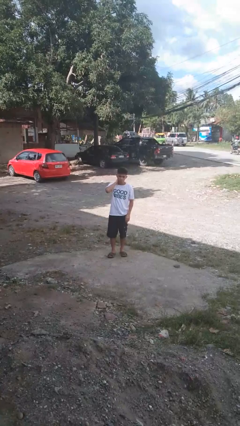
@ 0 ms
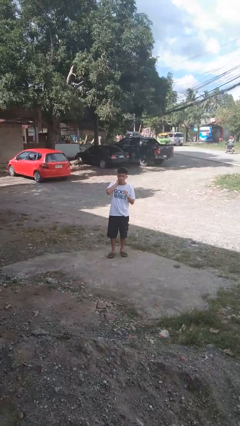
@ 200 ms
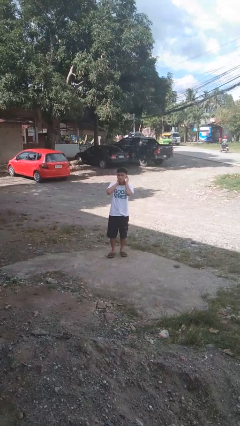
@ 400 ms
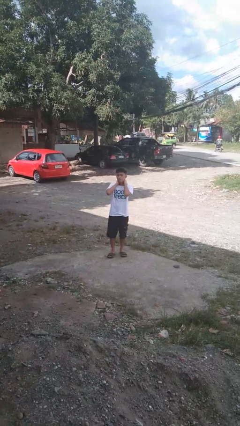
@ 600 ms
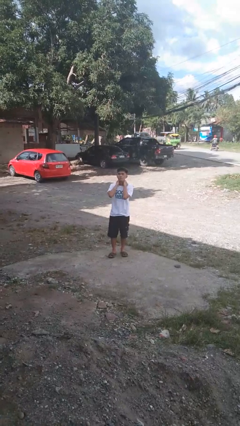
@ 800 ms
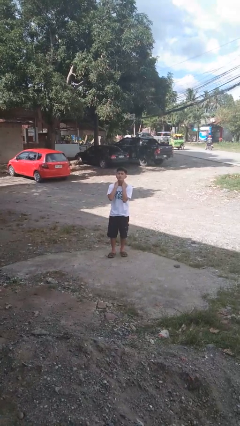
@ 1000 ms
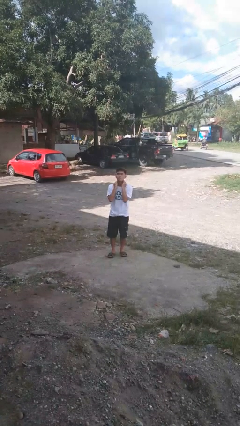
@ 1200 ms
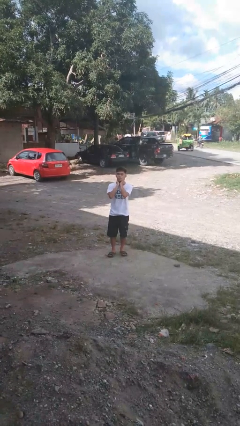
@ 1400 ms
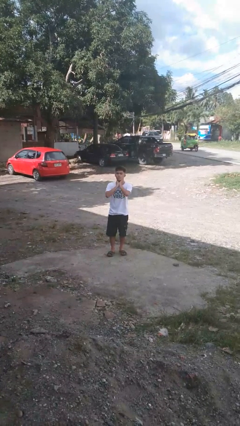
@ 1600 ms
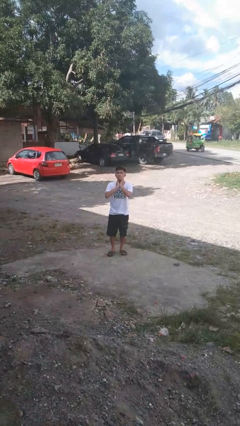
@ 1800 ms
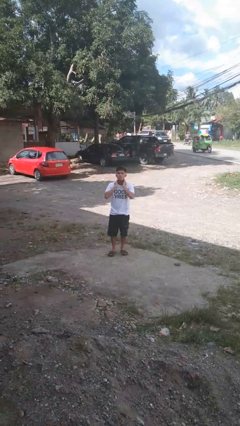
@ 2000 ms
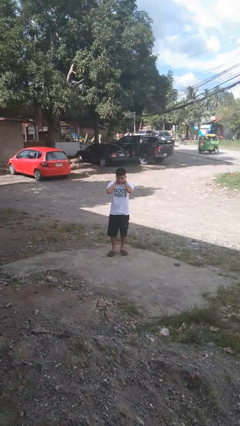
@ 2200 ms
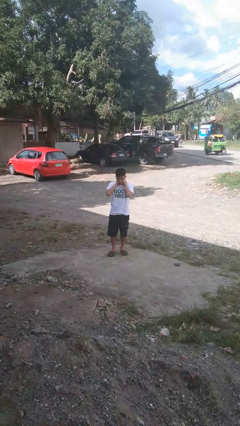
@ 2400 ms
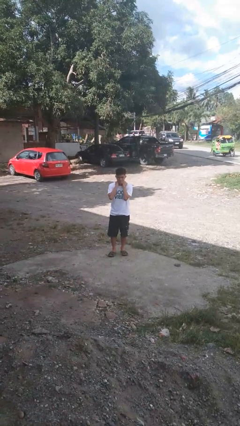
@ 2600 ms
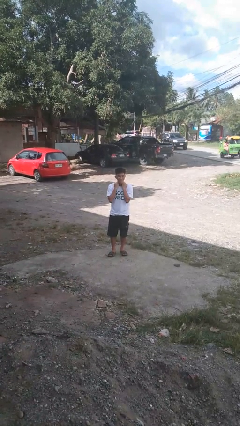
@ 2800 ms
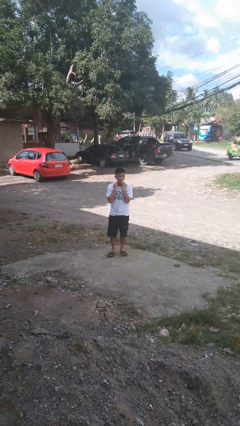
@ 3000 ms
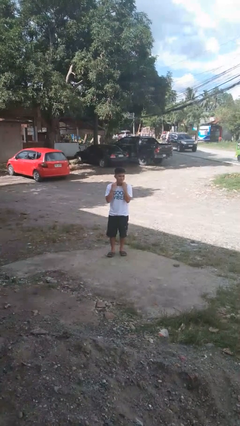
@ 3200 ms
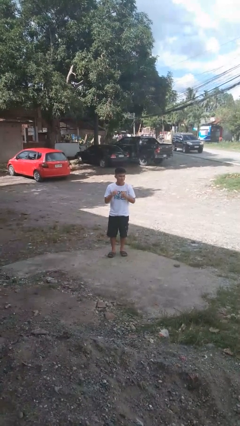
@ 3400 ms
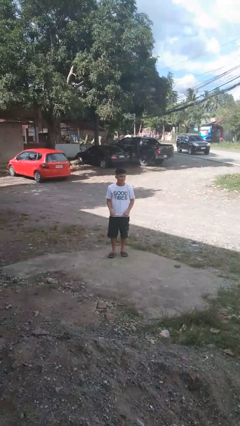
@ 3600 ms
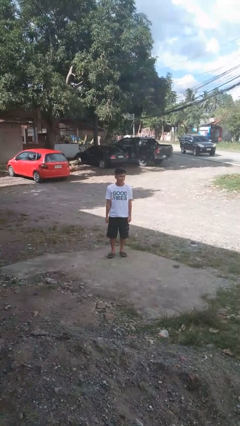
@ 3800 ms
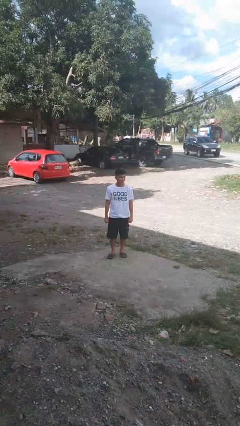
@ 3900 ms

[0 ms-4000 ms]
person rubs neck

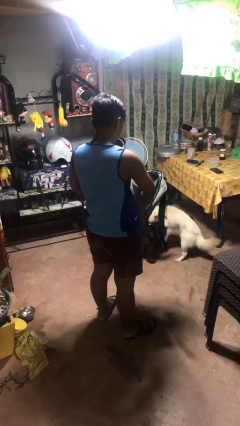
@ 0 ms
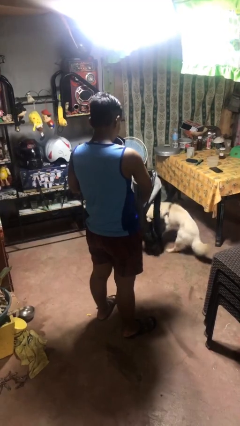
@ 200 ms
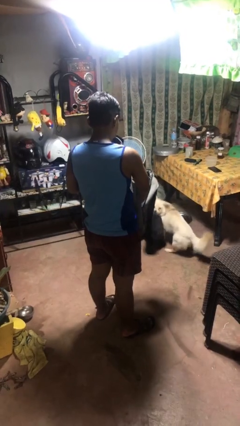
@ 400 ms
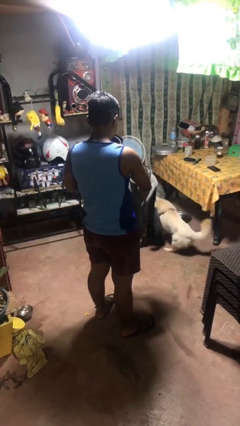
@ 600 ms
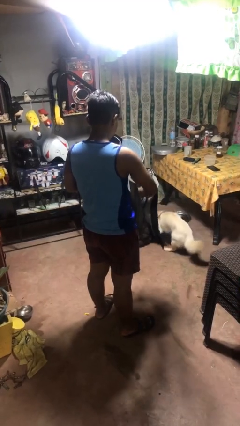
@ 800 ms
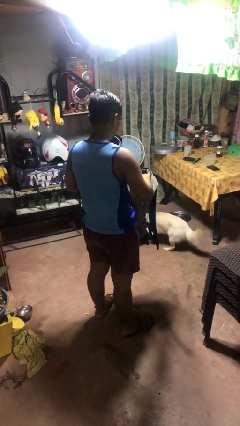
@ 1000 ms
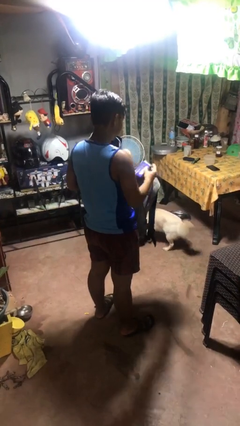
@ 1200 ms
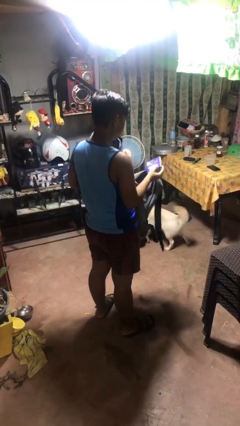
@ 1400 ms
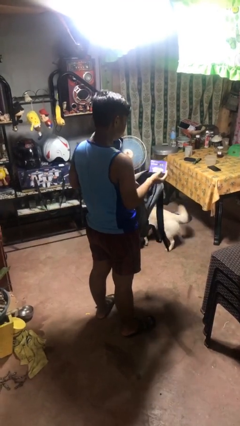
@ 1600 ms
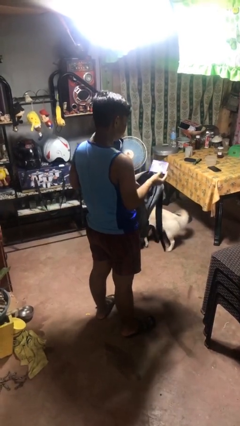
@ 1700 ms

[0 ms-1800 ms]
person takes object from bag

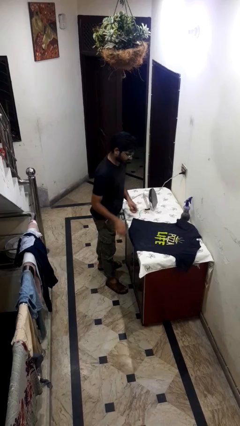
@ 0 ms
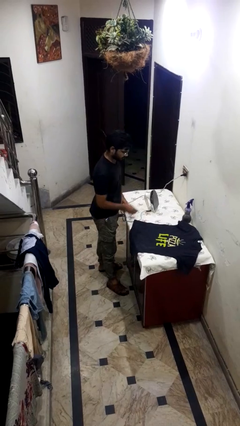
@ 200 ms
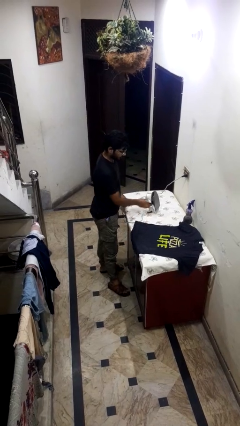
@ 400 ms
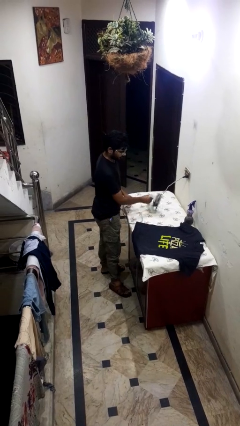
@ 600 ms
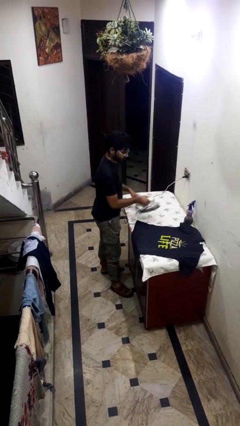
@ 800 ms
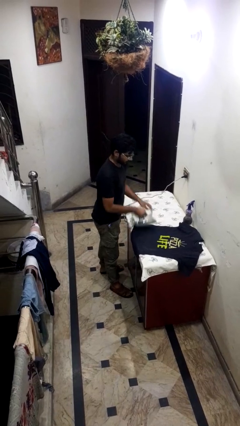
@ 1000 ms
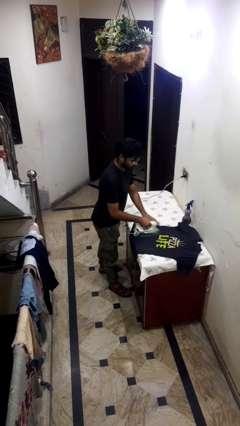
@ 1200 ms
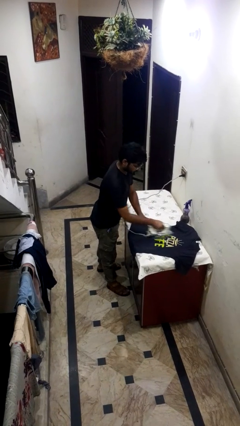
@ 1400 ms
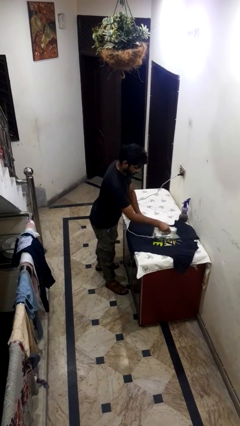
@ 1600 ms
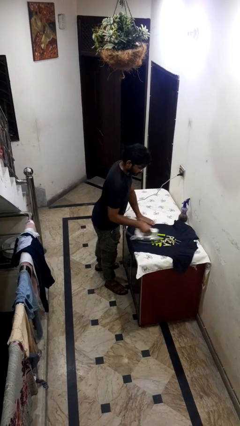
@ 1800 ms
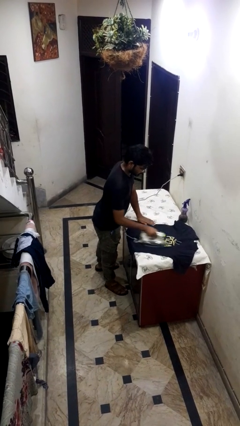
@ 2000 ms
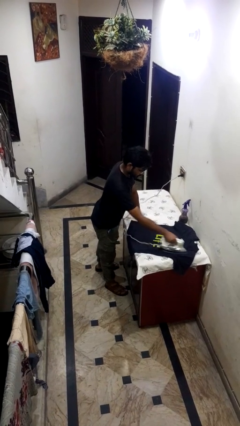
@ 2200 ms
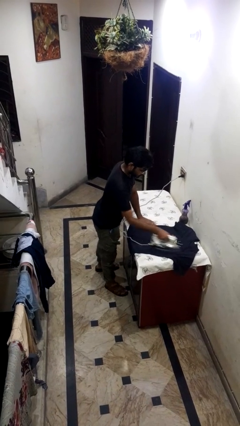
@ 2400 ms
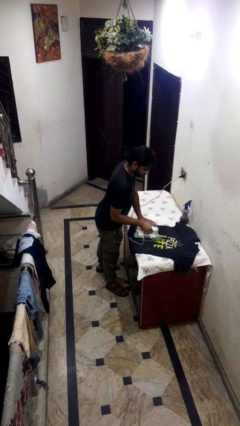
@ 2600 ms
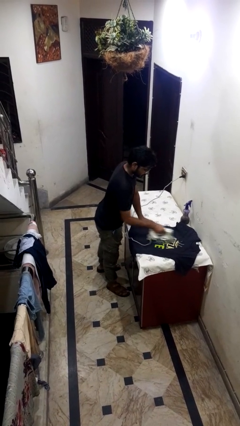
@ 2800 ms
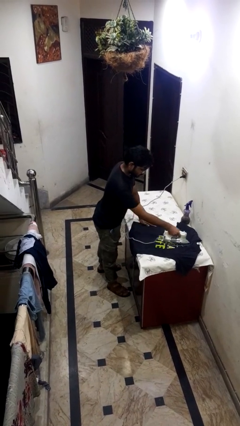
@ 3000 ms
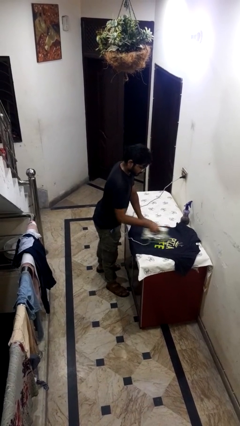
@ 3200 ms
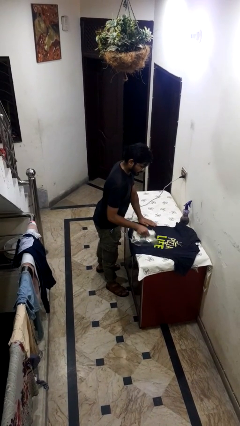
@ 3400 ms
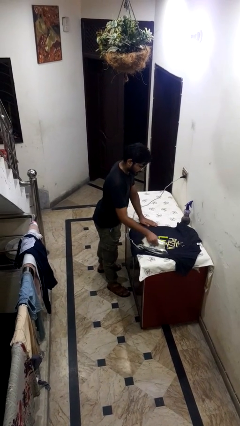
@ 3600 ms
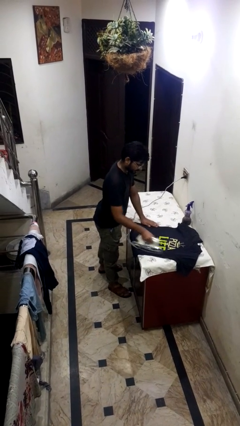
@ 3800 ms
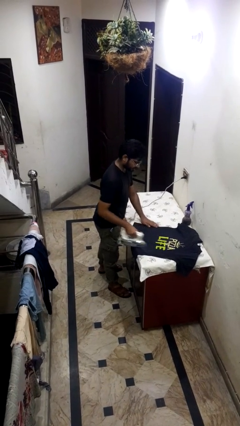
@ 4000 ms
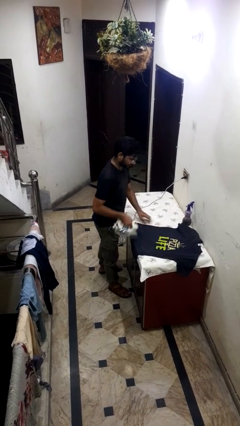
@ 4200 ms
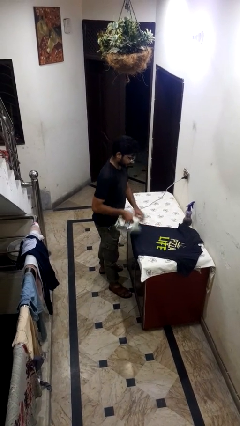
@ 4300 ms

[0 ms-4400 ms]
person irons clothes

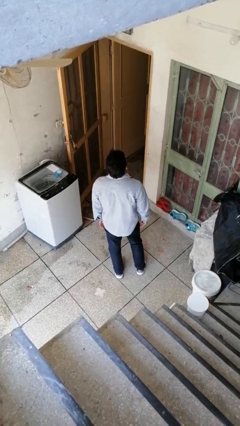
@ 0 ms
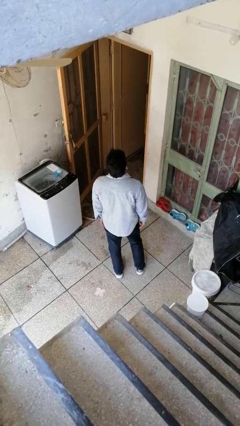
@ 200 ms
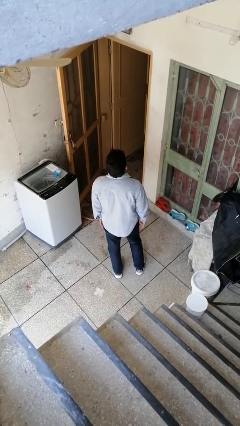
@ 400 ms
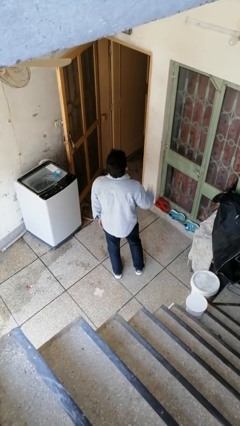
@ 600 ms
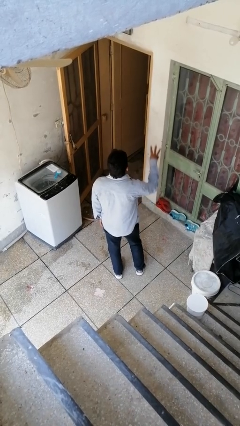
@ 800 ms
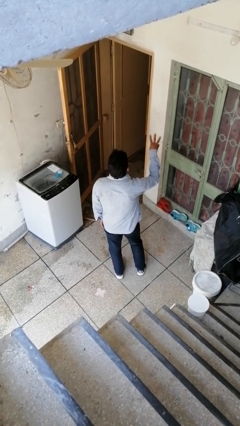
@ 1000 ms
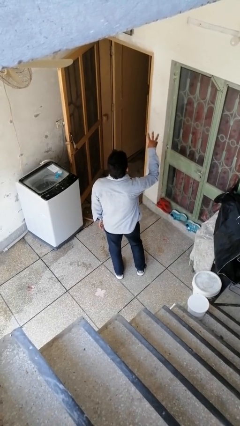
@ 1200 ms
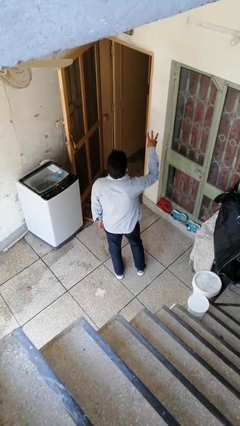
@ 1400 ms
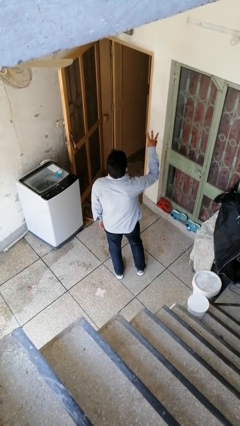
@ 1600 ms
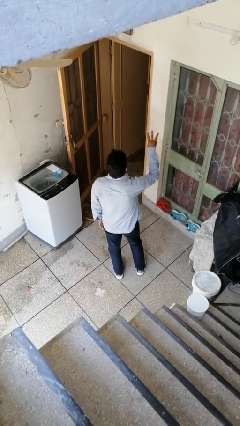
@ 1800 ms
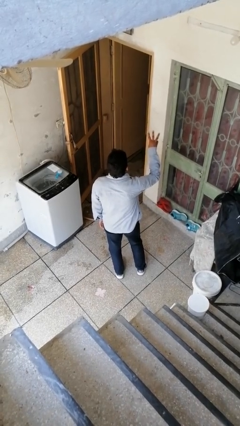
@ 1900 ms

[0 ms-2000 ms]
person gestures number three

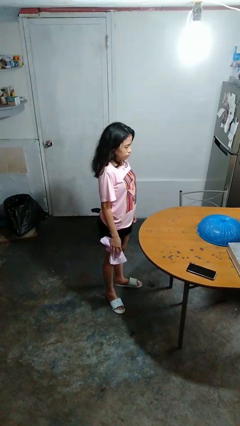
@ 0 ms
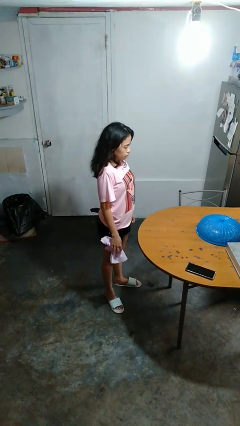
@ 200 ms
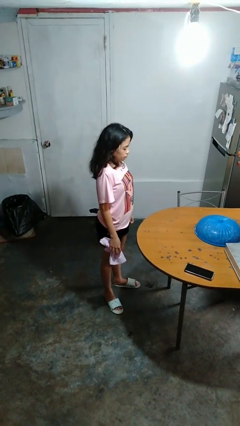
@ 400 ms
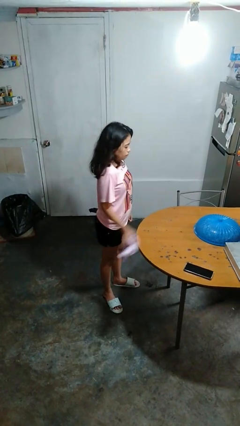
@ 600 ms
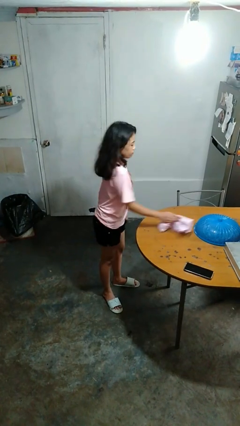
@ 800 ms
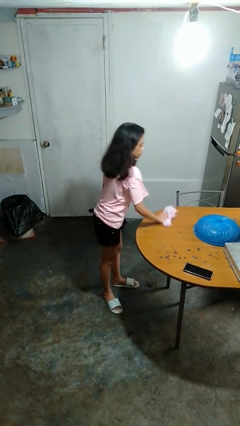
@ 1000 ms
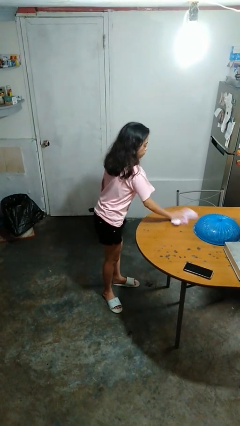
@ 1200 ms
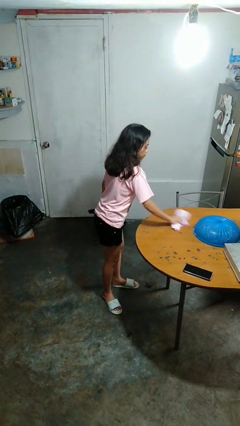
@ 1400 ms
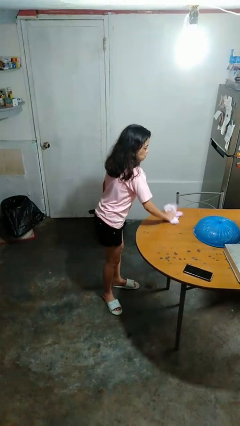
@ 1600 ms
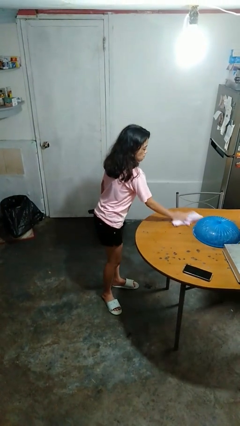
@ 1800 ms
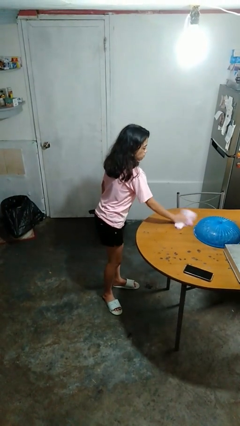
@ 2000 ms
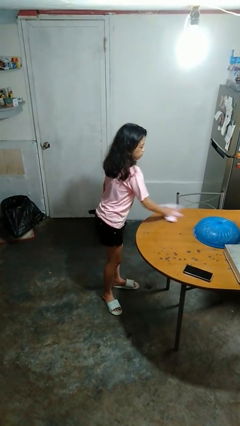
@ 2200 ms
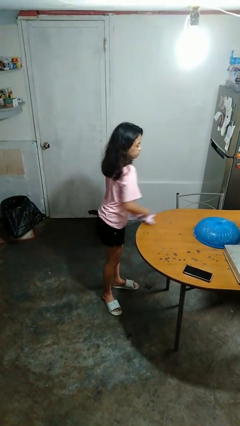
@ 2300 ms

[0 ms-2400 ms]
person cleans table with rag

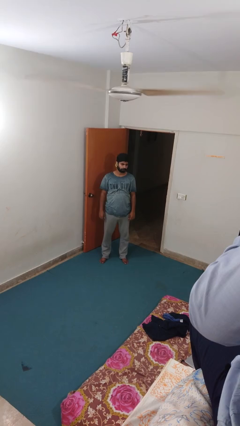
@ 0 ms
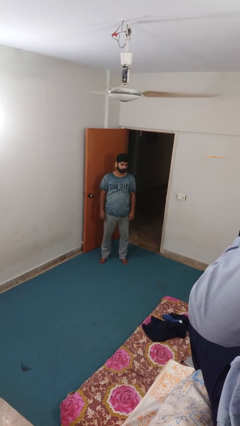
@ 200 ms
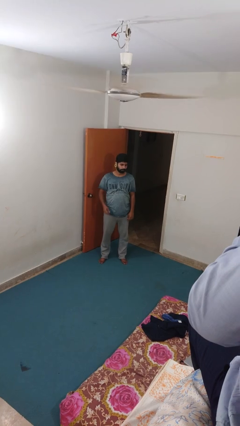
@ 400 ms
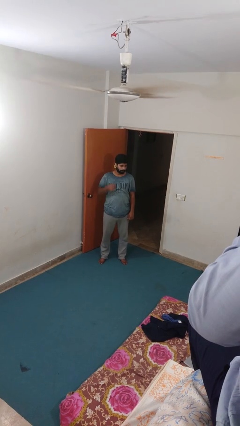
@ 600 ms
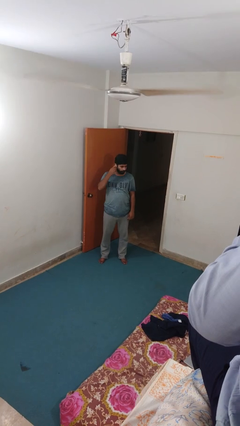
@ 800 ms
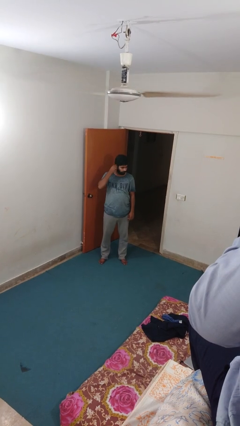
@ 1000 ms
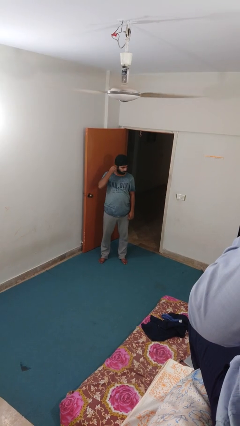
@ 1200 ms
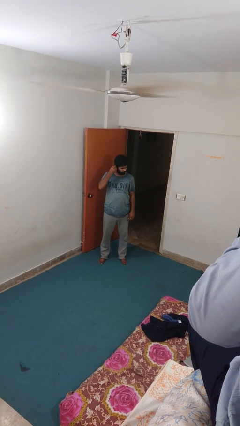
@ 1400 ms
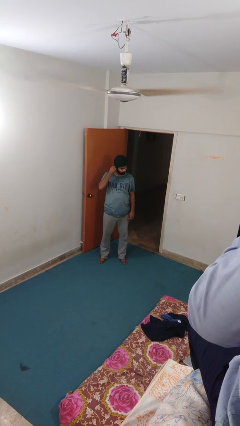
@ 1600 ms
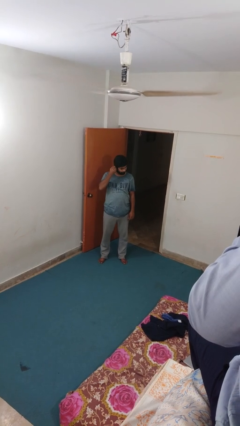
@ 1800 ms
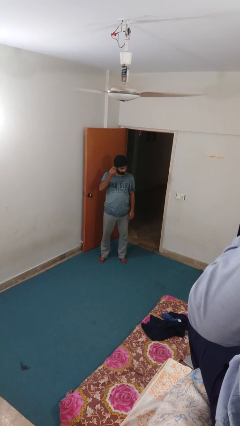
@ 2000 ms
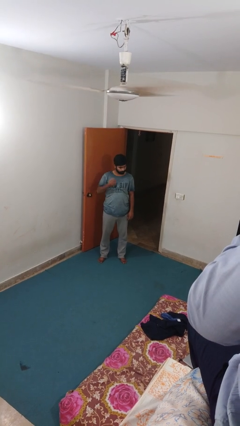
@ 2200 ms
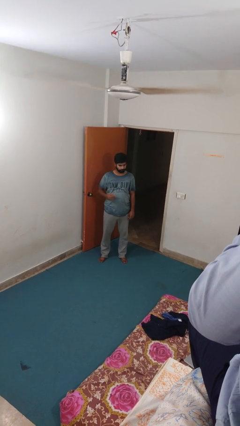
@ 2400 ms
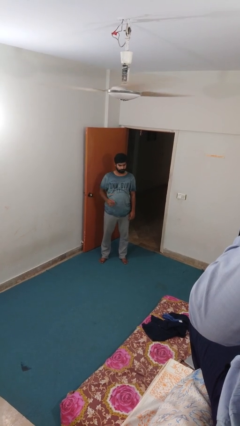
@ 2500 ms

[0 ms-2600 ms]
person takes off earrings
